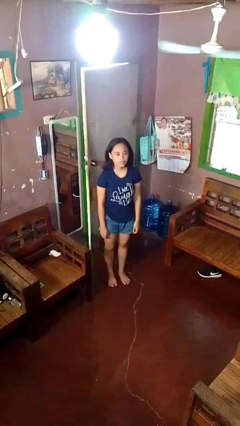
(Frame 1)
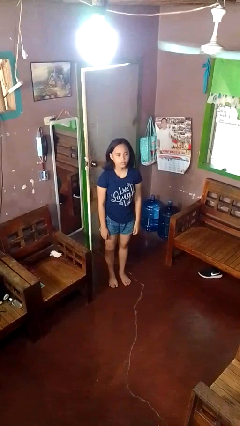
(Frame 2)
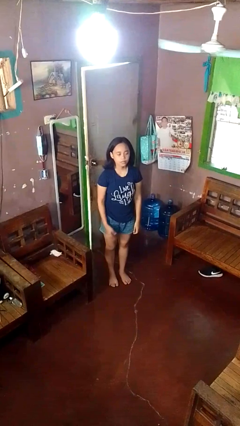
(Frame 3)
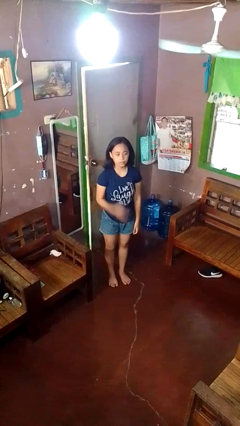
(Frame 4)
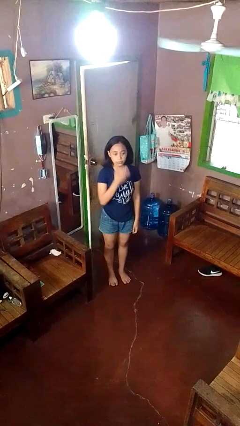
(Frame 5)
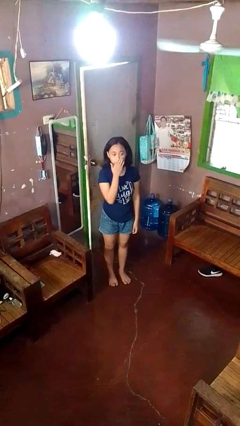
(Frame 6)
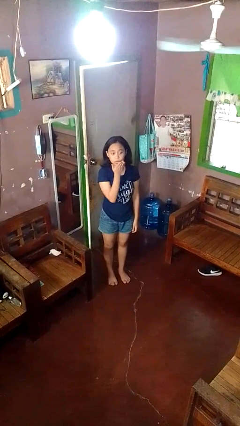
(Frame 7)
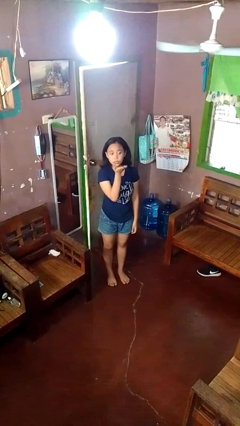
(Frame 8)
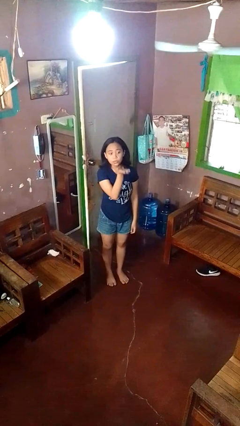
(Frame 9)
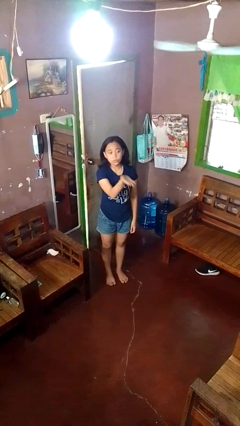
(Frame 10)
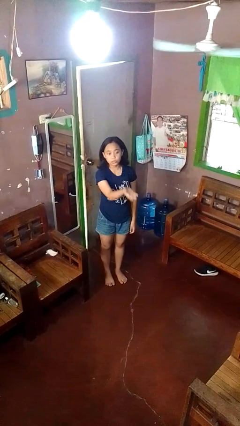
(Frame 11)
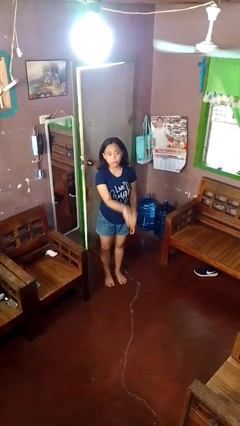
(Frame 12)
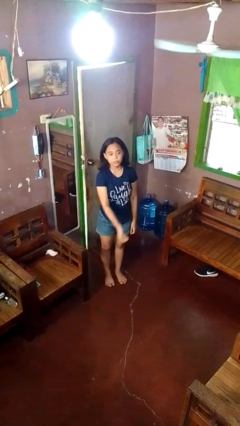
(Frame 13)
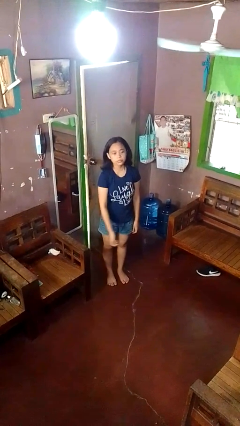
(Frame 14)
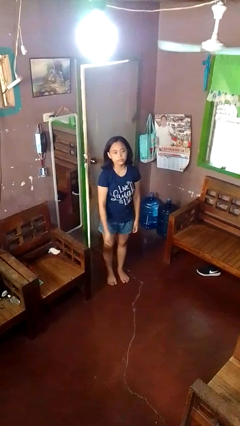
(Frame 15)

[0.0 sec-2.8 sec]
person gestures blow kiss

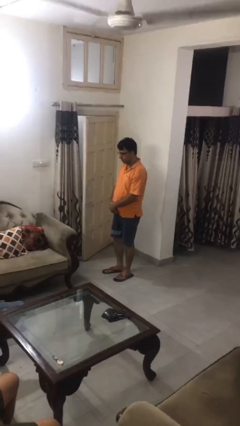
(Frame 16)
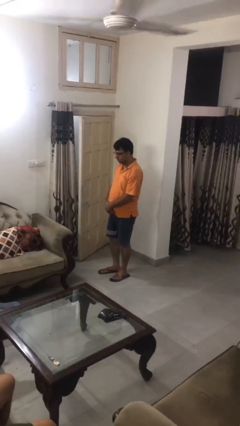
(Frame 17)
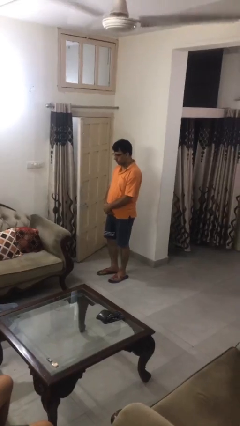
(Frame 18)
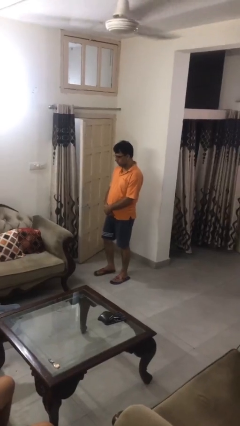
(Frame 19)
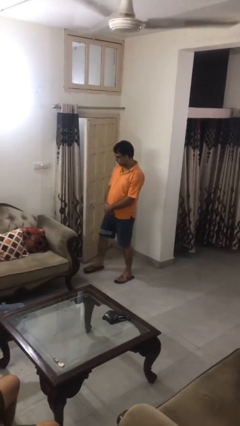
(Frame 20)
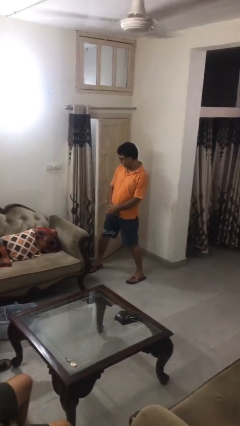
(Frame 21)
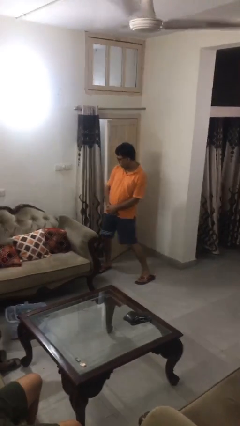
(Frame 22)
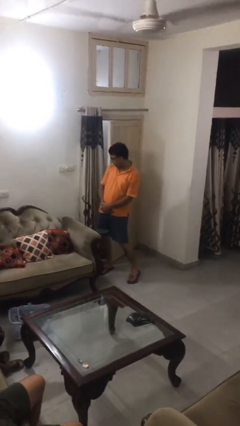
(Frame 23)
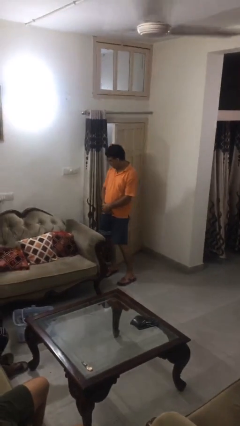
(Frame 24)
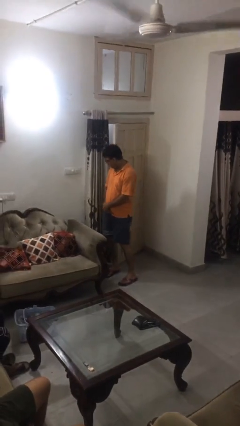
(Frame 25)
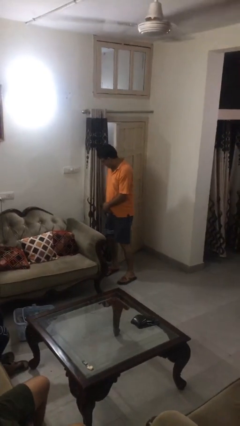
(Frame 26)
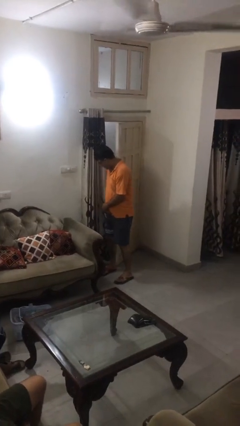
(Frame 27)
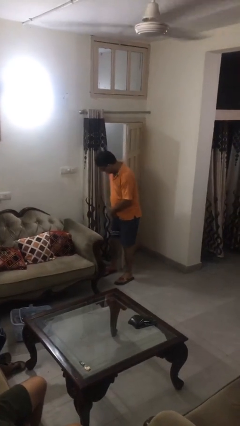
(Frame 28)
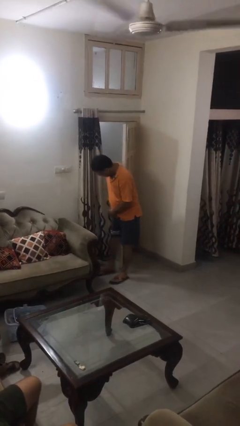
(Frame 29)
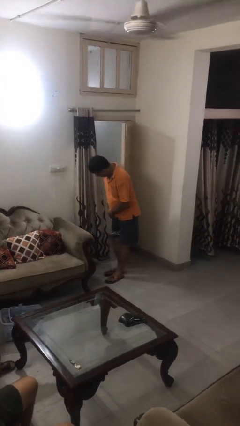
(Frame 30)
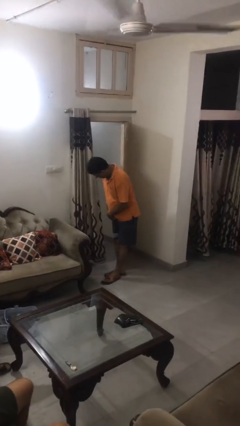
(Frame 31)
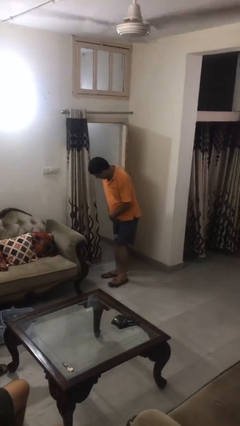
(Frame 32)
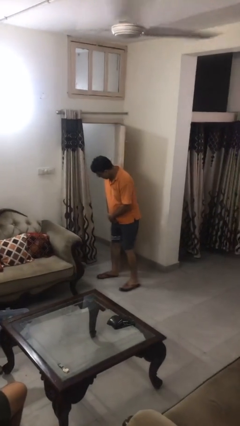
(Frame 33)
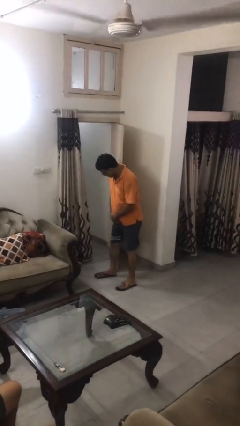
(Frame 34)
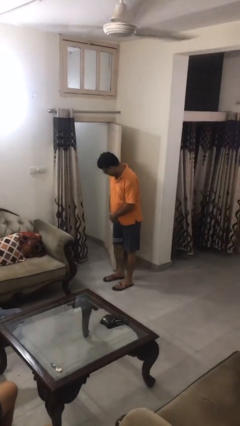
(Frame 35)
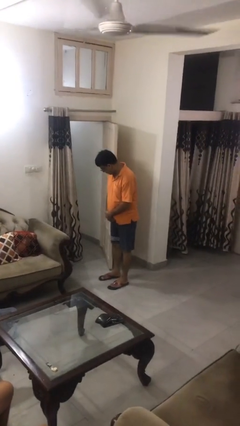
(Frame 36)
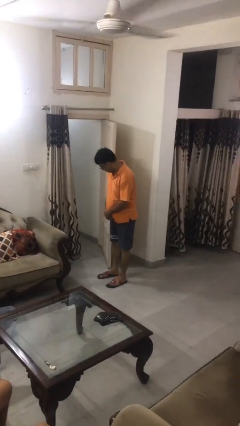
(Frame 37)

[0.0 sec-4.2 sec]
person opens facility door

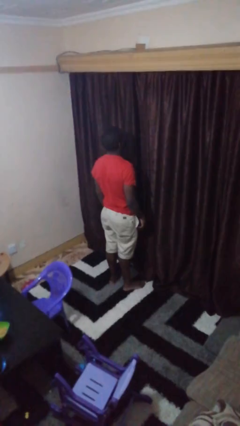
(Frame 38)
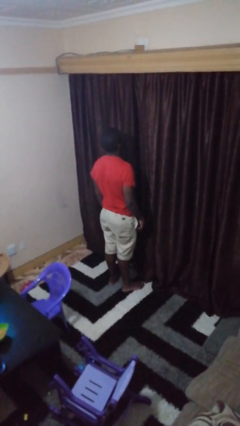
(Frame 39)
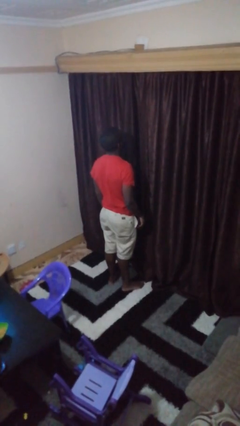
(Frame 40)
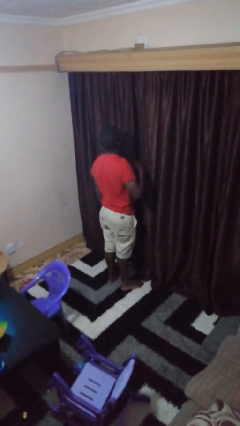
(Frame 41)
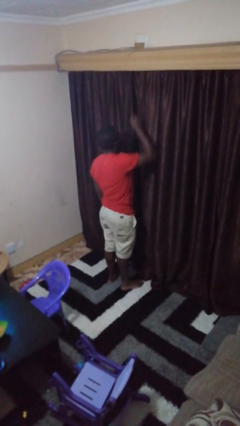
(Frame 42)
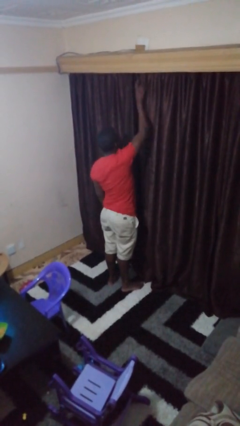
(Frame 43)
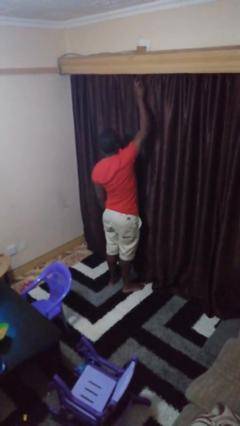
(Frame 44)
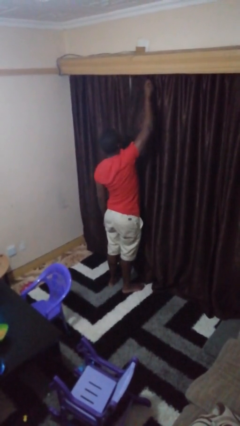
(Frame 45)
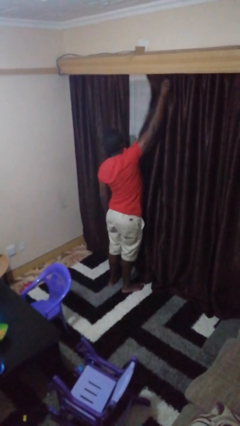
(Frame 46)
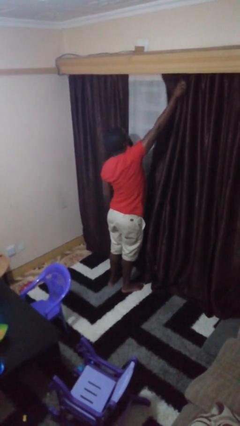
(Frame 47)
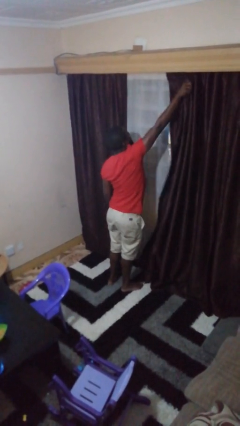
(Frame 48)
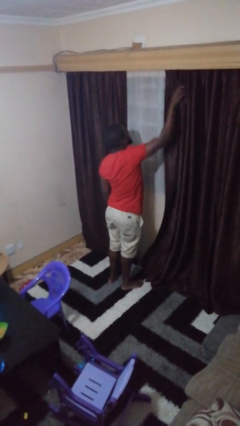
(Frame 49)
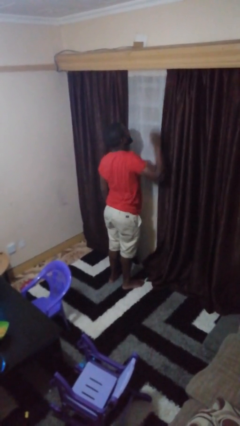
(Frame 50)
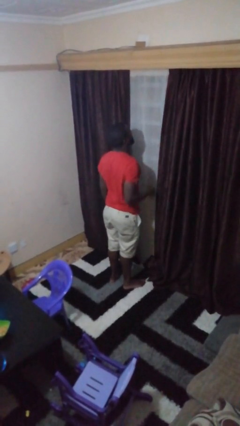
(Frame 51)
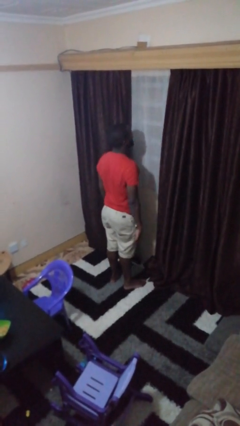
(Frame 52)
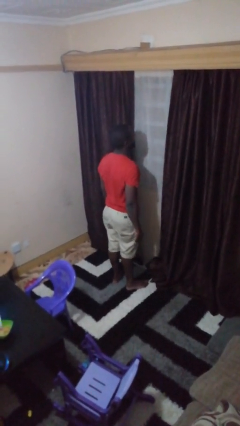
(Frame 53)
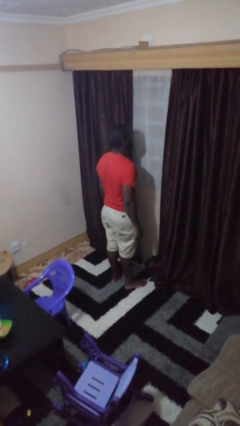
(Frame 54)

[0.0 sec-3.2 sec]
person opens curtains

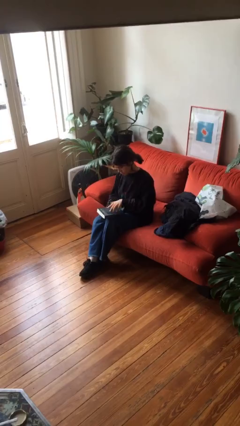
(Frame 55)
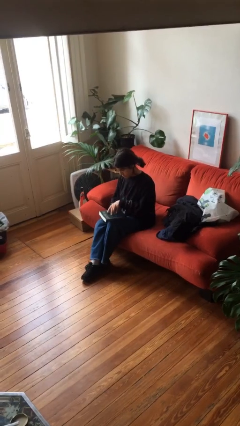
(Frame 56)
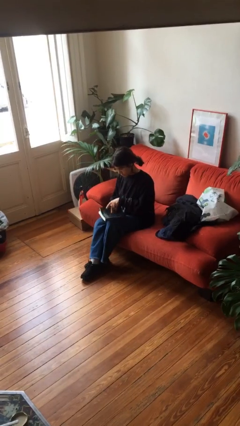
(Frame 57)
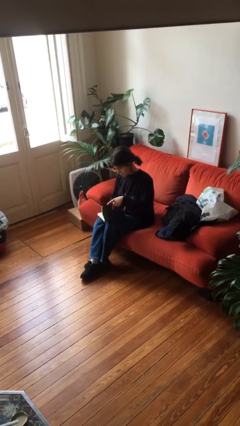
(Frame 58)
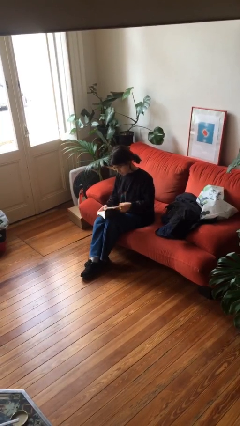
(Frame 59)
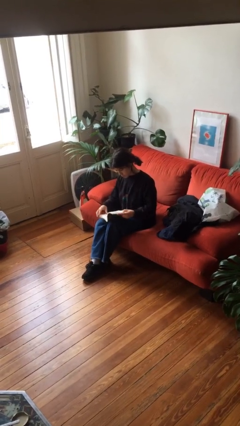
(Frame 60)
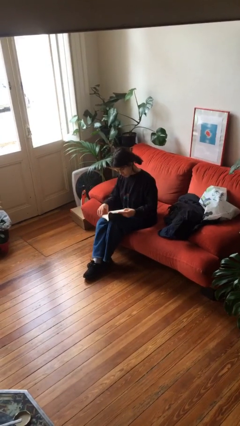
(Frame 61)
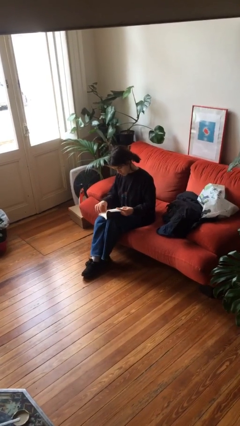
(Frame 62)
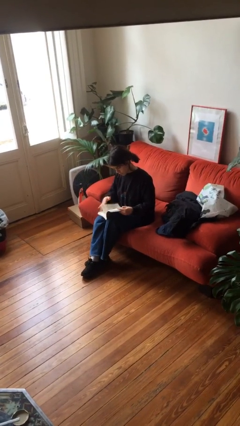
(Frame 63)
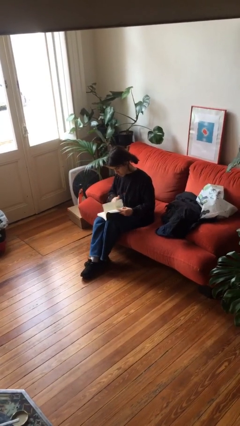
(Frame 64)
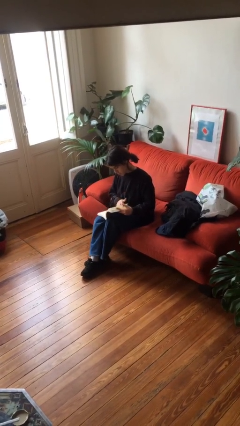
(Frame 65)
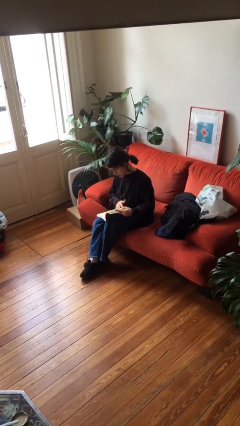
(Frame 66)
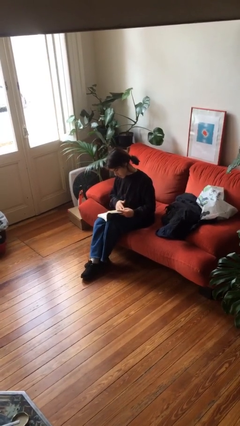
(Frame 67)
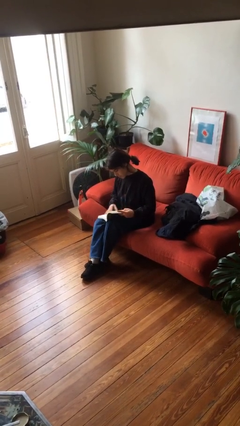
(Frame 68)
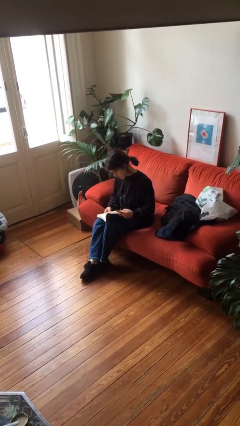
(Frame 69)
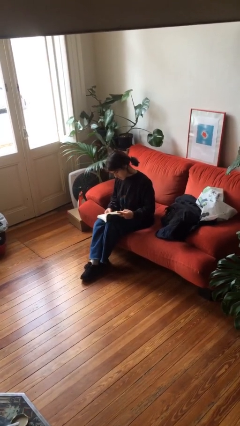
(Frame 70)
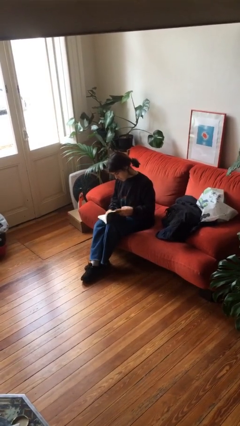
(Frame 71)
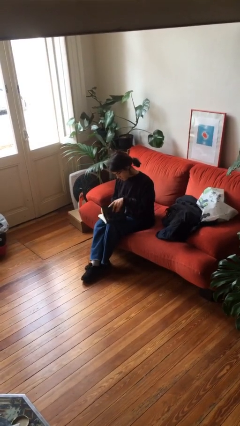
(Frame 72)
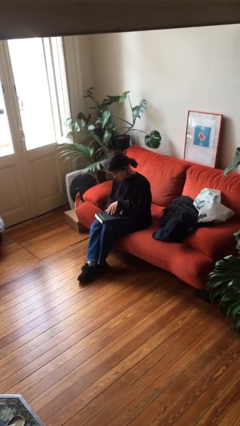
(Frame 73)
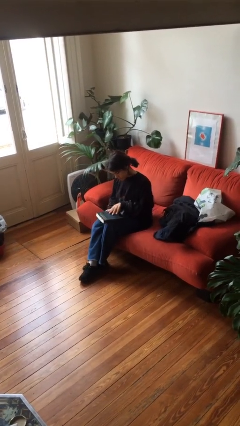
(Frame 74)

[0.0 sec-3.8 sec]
person reads book

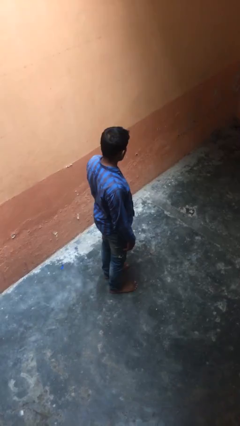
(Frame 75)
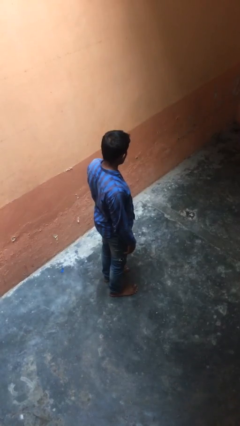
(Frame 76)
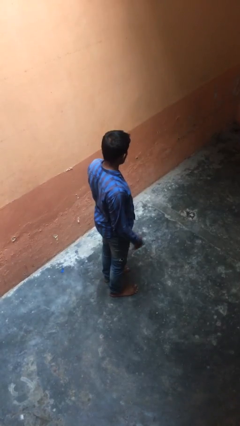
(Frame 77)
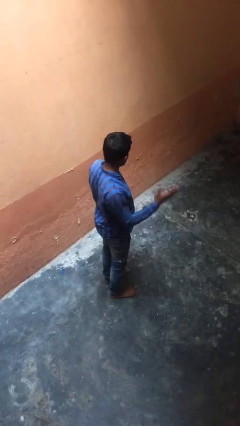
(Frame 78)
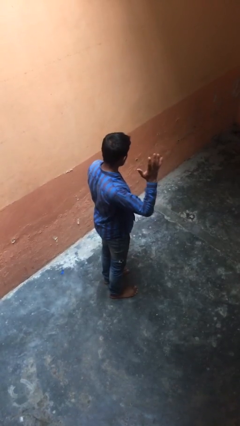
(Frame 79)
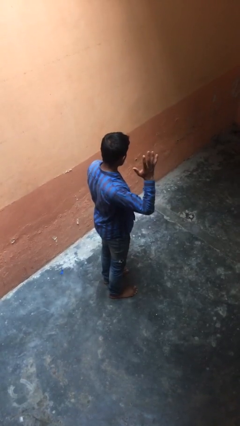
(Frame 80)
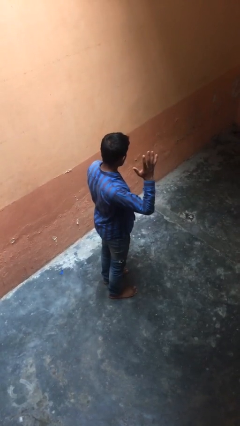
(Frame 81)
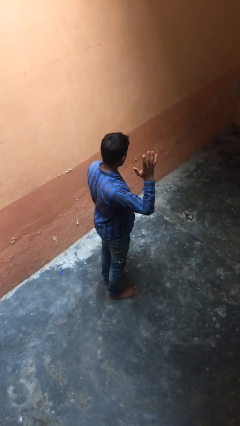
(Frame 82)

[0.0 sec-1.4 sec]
person gestures number five

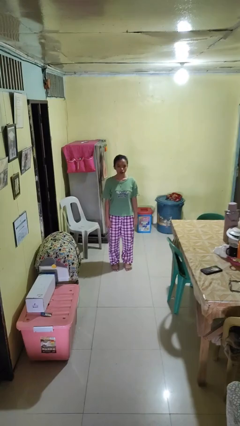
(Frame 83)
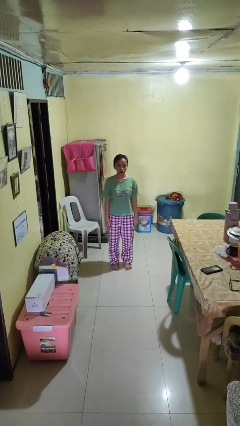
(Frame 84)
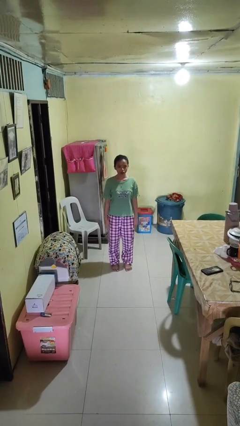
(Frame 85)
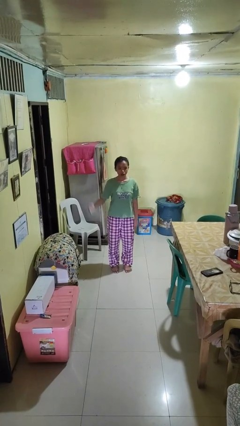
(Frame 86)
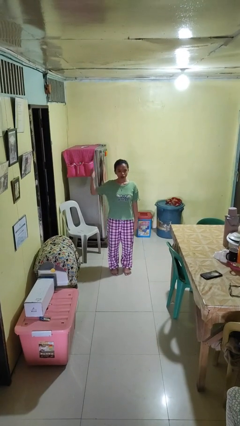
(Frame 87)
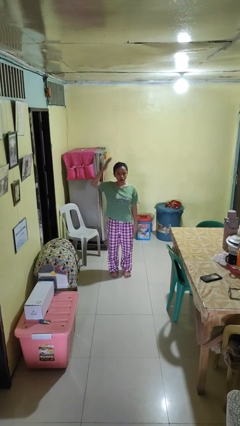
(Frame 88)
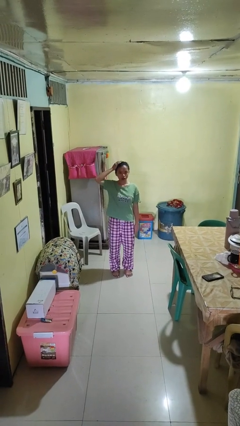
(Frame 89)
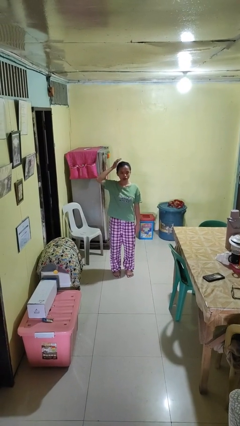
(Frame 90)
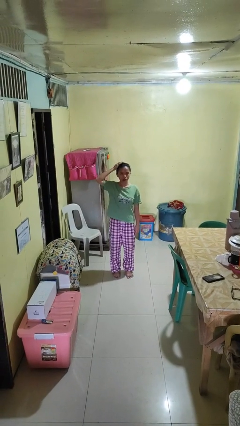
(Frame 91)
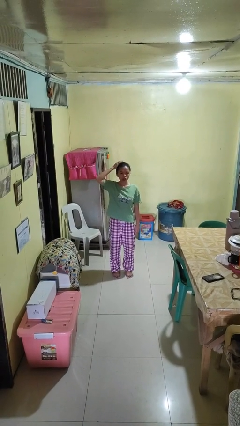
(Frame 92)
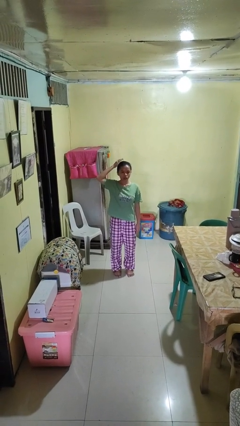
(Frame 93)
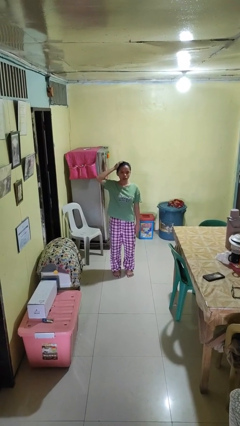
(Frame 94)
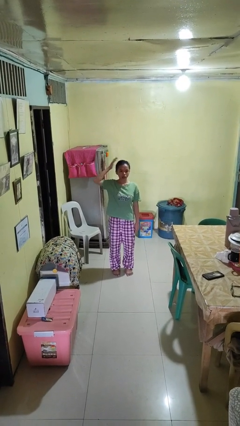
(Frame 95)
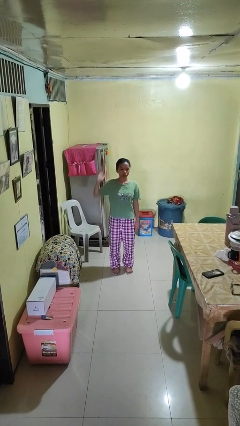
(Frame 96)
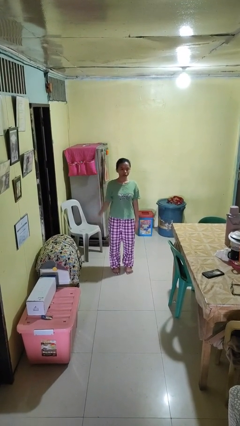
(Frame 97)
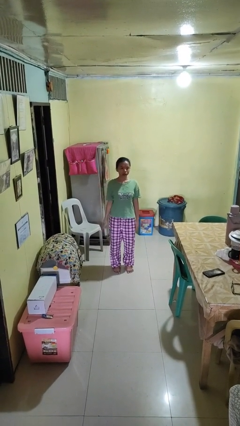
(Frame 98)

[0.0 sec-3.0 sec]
person pats head
